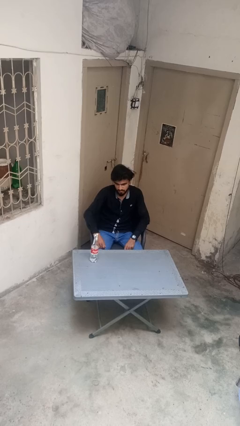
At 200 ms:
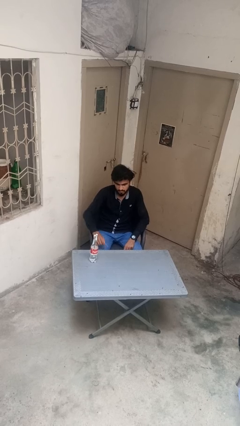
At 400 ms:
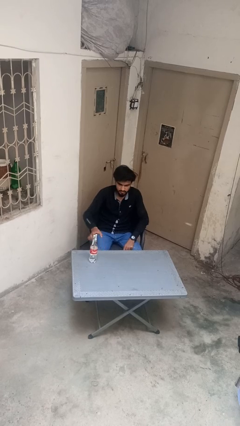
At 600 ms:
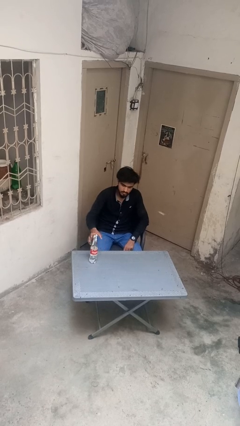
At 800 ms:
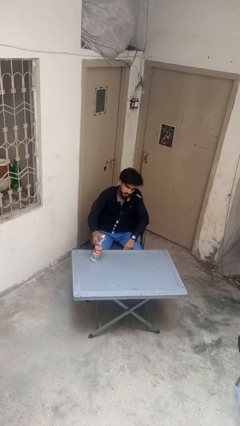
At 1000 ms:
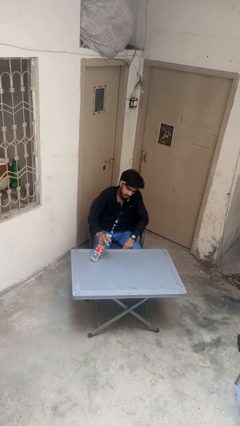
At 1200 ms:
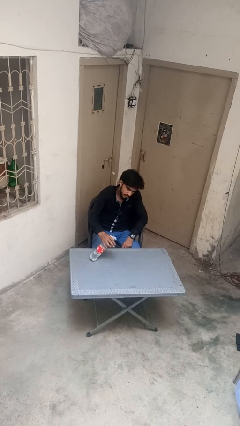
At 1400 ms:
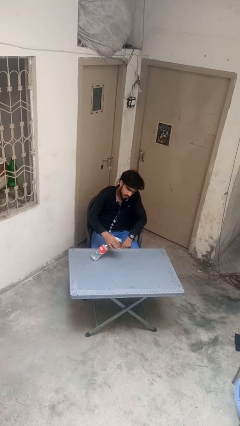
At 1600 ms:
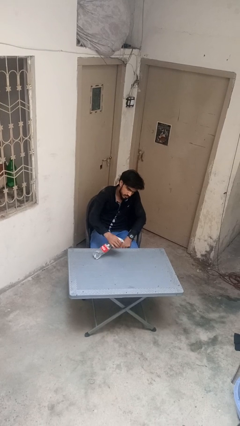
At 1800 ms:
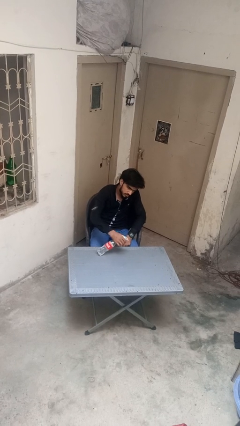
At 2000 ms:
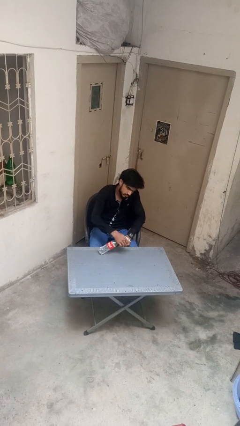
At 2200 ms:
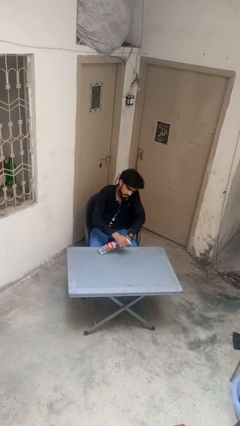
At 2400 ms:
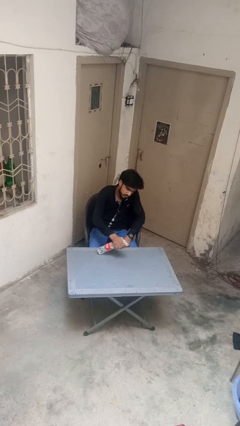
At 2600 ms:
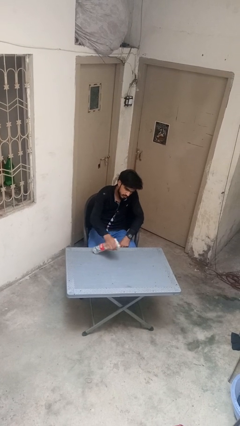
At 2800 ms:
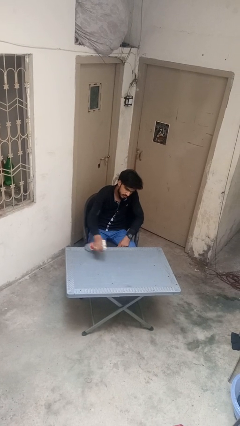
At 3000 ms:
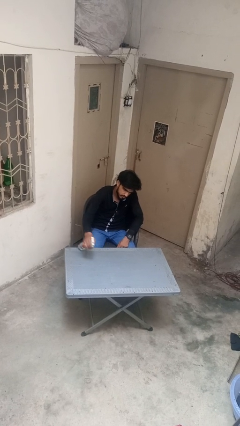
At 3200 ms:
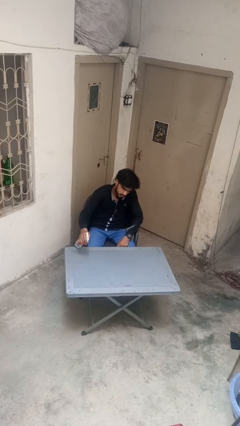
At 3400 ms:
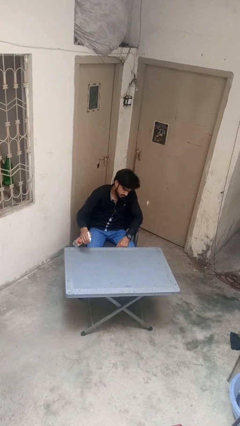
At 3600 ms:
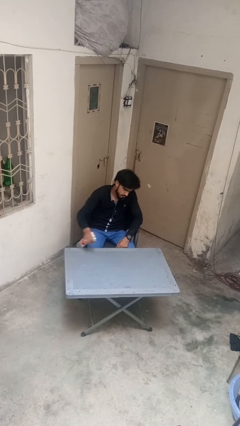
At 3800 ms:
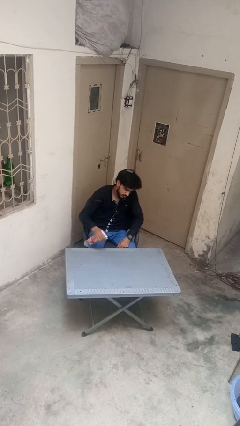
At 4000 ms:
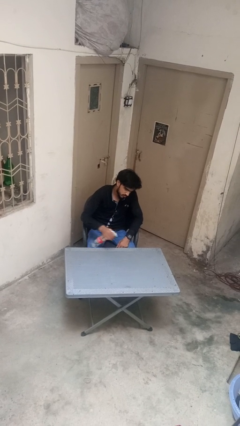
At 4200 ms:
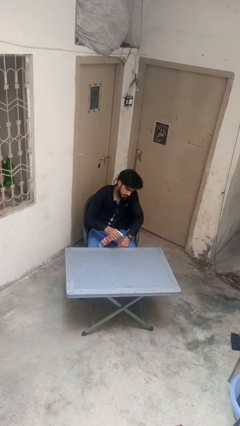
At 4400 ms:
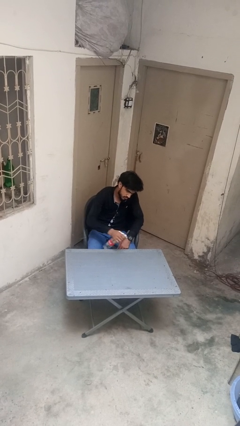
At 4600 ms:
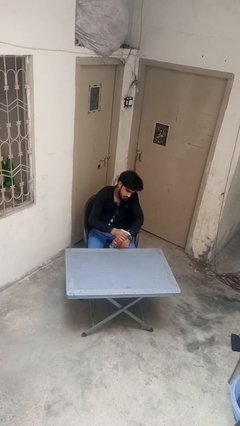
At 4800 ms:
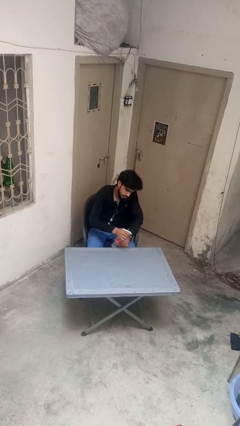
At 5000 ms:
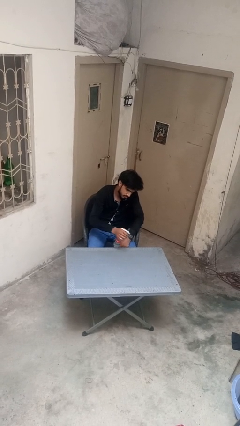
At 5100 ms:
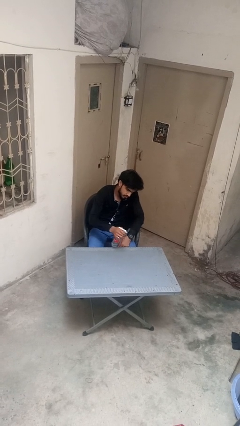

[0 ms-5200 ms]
person sprays from bottle

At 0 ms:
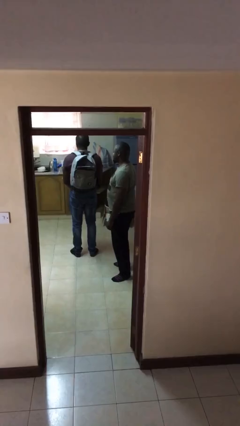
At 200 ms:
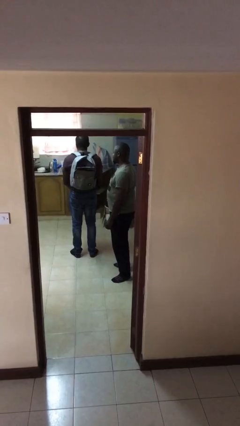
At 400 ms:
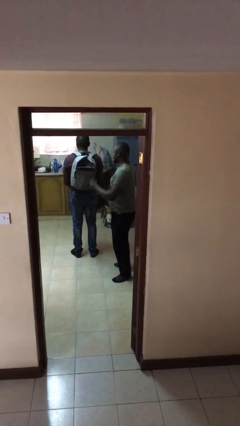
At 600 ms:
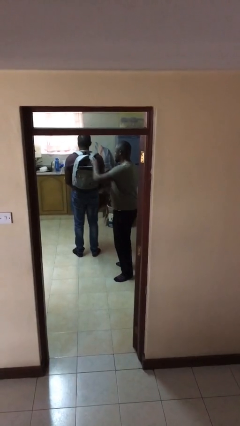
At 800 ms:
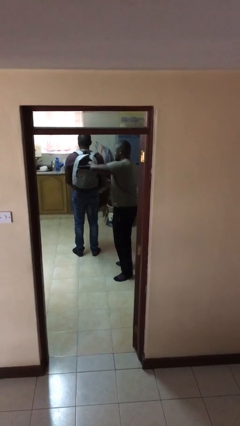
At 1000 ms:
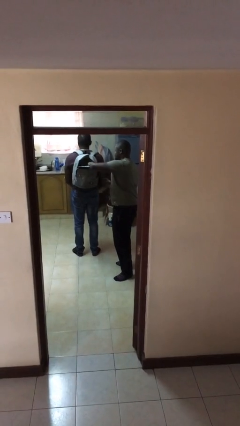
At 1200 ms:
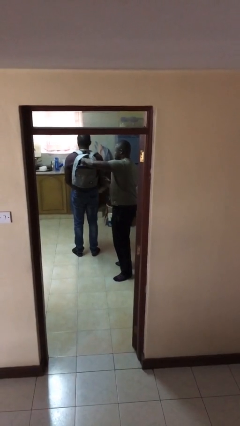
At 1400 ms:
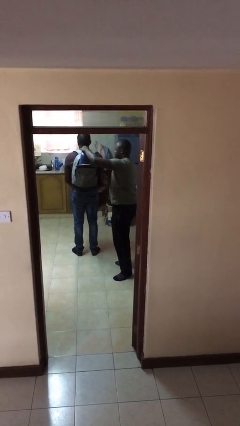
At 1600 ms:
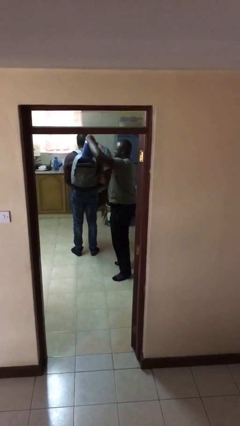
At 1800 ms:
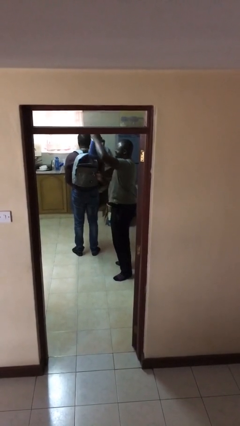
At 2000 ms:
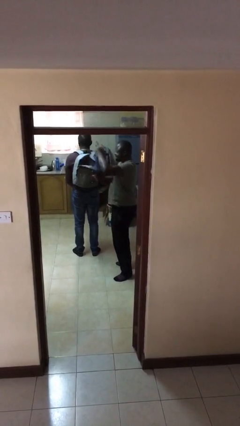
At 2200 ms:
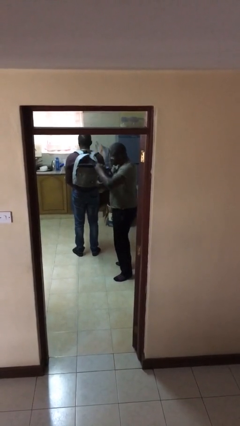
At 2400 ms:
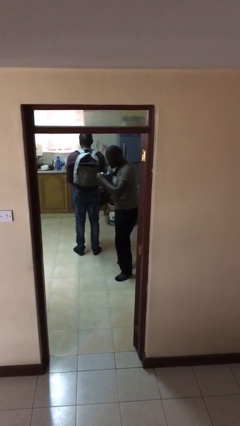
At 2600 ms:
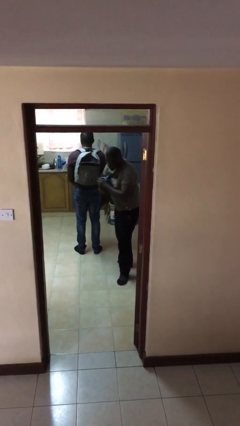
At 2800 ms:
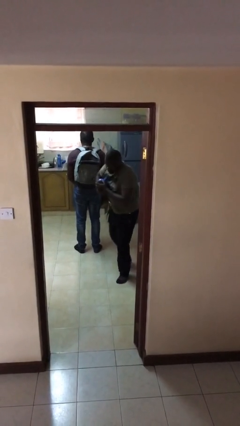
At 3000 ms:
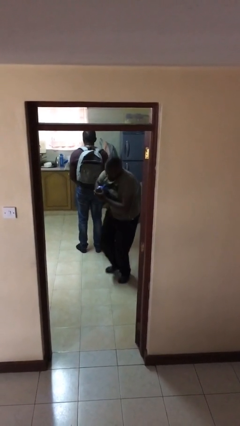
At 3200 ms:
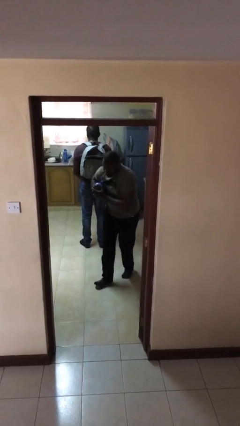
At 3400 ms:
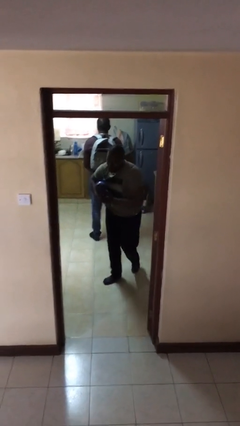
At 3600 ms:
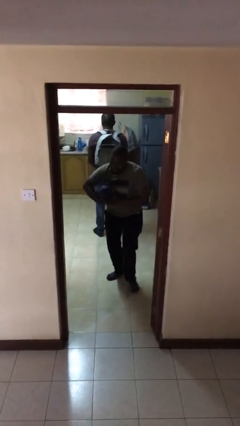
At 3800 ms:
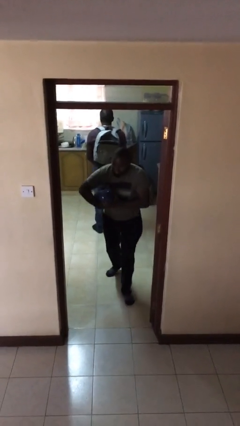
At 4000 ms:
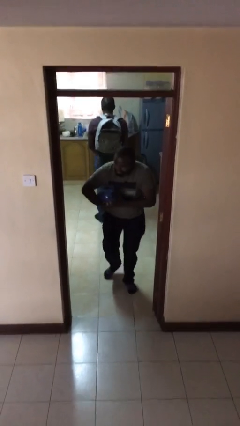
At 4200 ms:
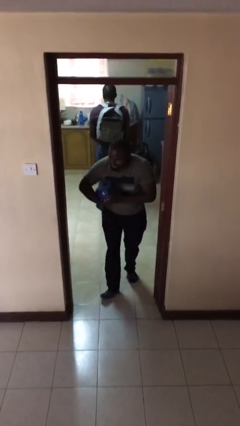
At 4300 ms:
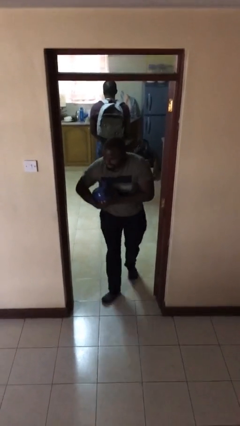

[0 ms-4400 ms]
person steals object from person

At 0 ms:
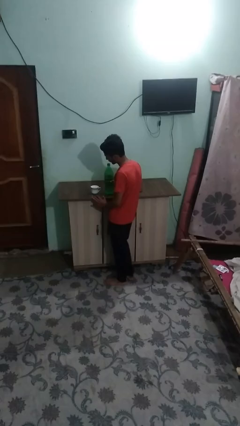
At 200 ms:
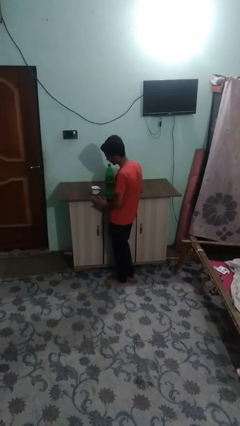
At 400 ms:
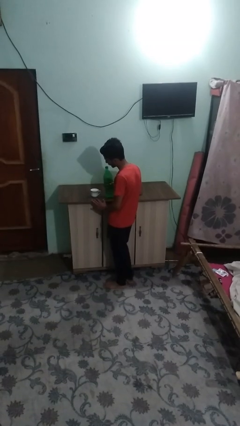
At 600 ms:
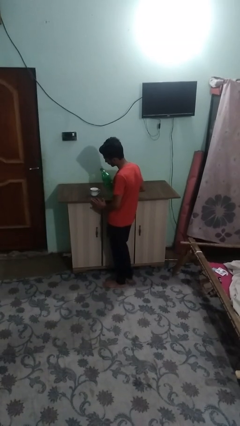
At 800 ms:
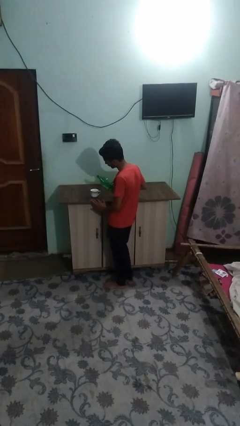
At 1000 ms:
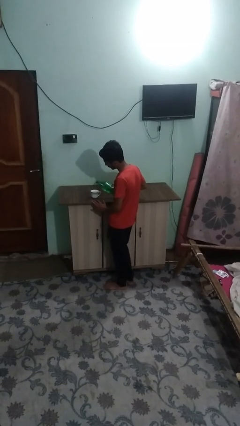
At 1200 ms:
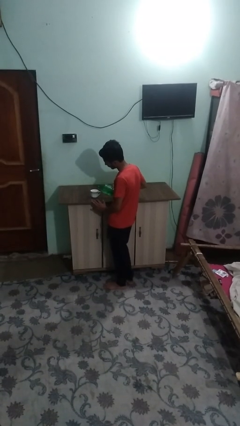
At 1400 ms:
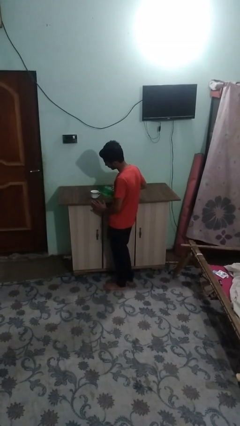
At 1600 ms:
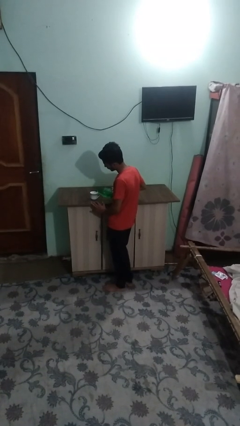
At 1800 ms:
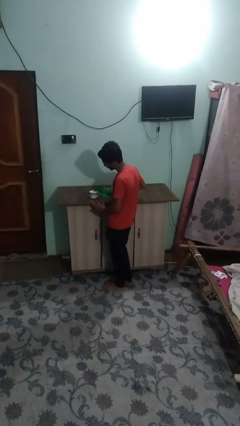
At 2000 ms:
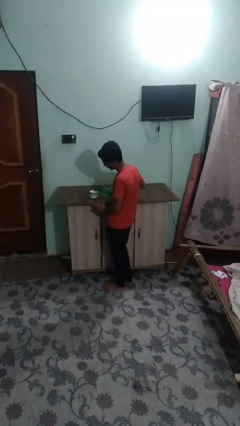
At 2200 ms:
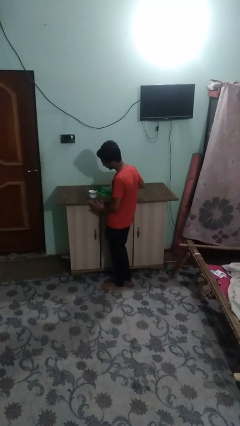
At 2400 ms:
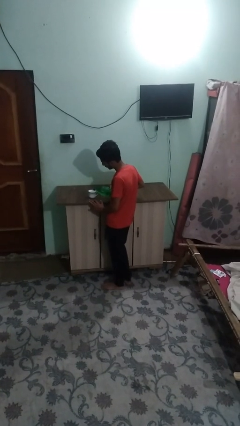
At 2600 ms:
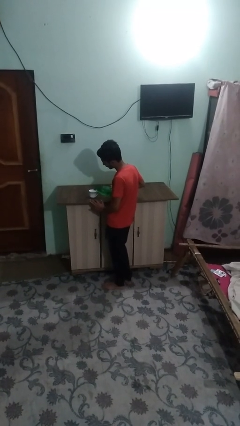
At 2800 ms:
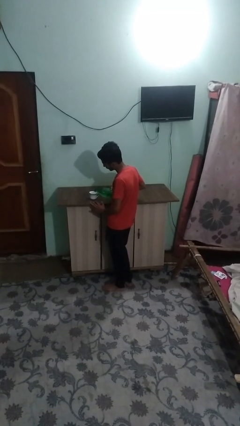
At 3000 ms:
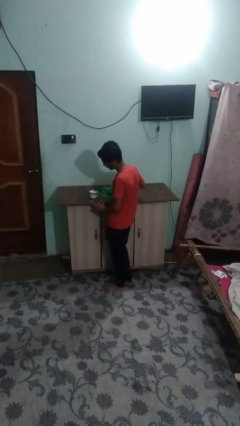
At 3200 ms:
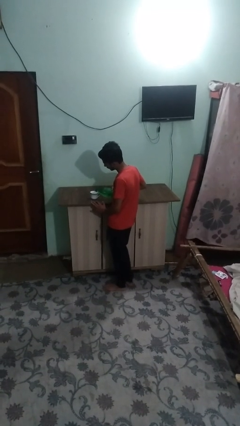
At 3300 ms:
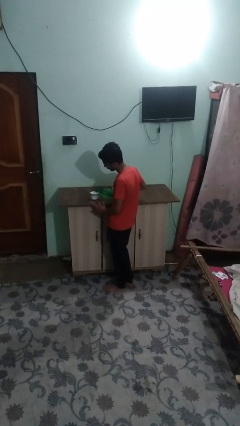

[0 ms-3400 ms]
person pours liquid into cup

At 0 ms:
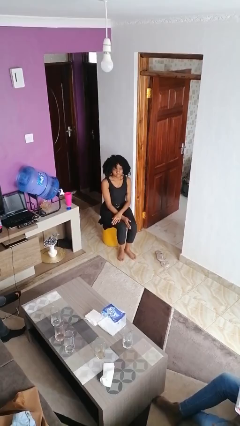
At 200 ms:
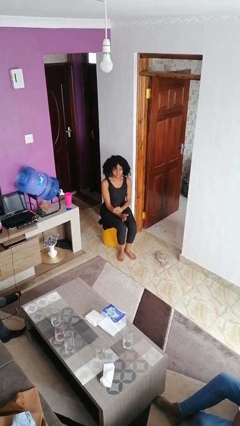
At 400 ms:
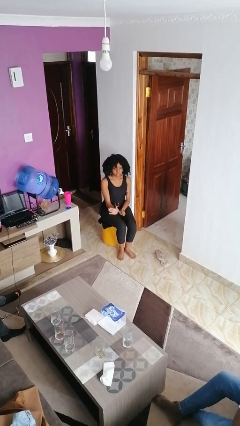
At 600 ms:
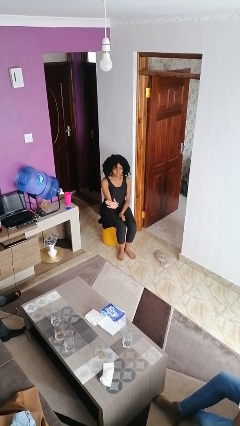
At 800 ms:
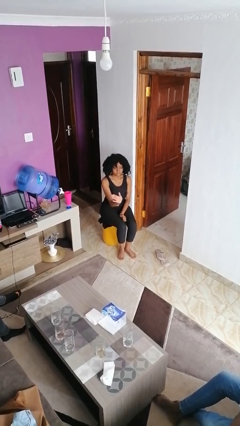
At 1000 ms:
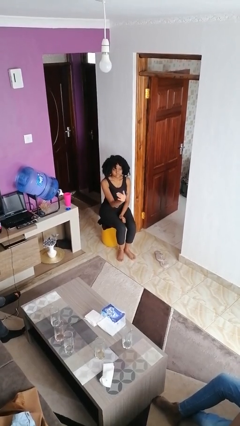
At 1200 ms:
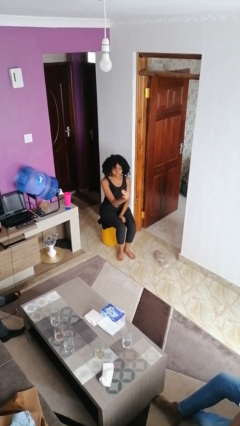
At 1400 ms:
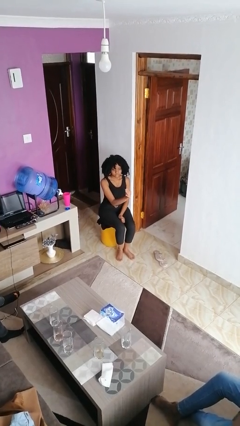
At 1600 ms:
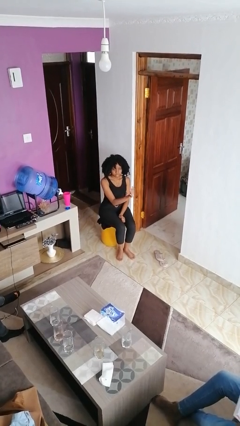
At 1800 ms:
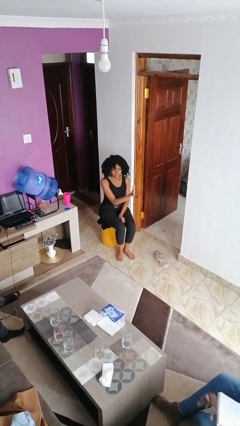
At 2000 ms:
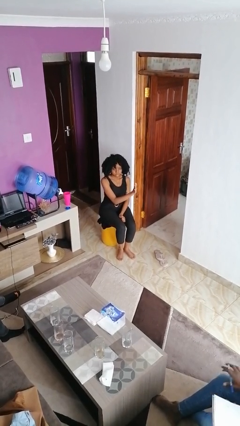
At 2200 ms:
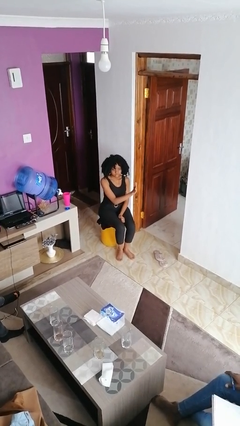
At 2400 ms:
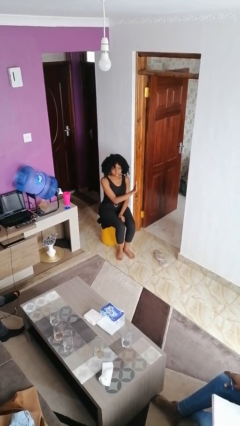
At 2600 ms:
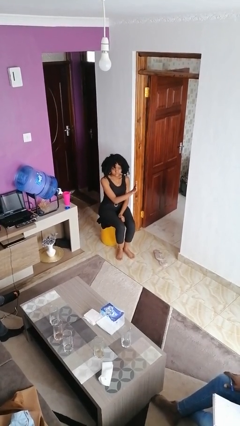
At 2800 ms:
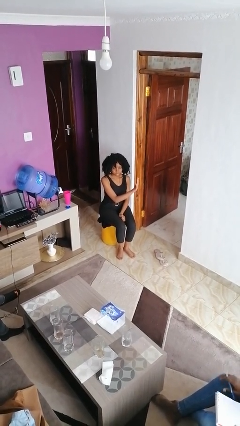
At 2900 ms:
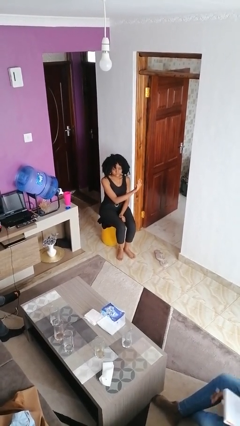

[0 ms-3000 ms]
person gestures swipe left

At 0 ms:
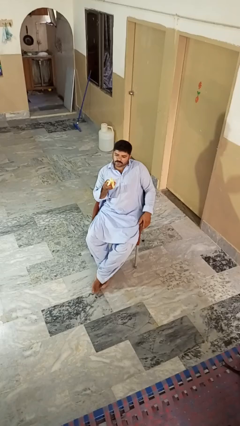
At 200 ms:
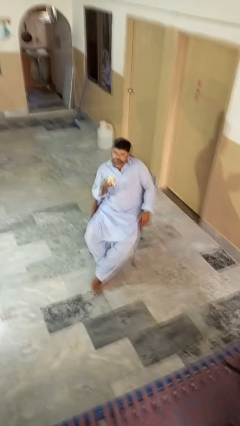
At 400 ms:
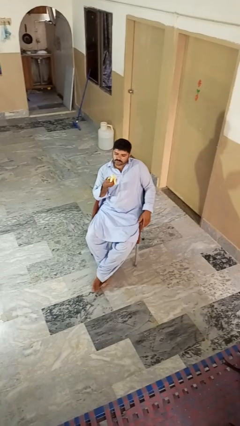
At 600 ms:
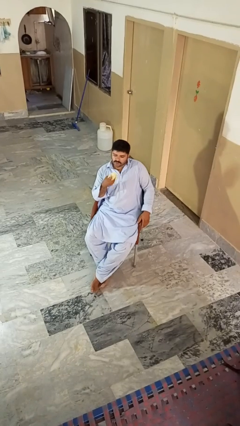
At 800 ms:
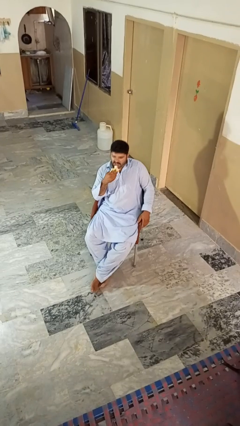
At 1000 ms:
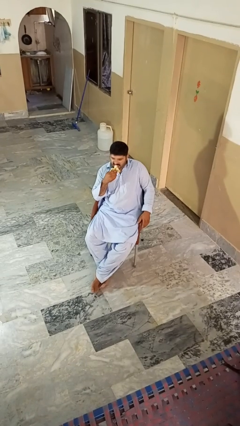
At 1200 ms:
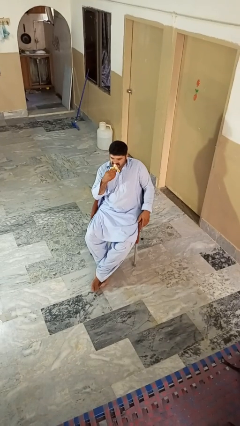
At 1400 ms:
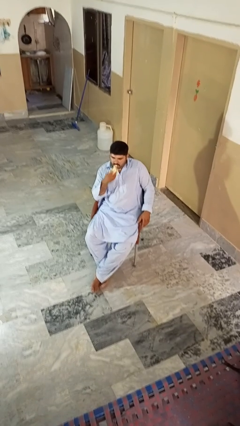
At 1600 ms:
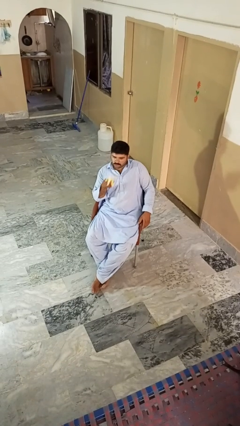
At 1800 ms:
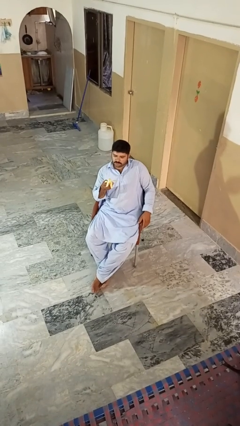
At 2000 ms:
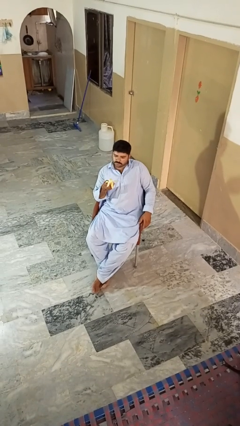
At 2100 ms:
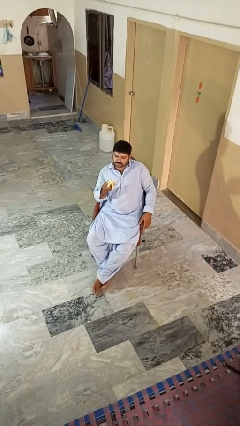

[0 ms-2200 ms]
person eats banana
